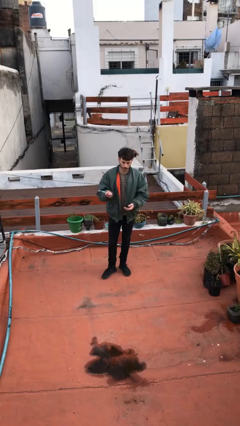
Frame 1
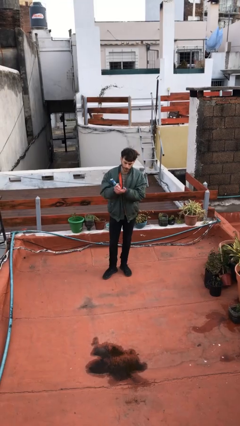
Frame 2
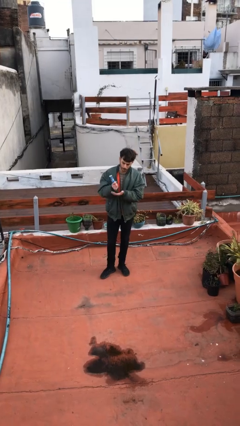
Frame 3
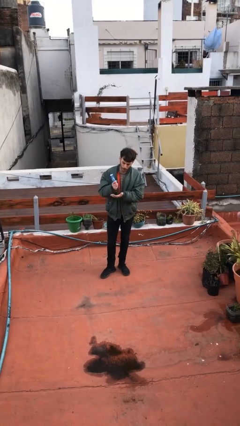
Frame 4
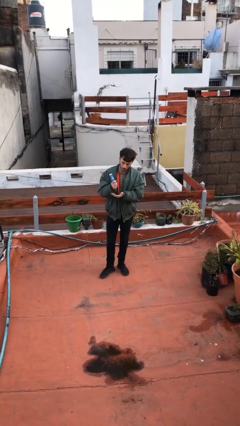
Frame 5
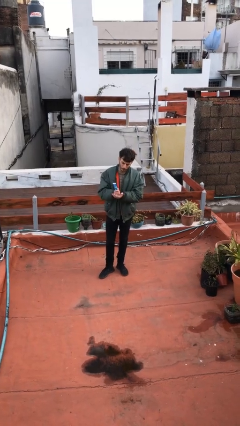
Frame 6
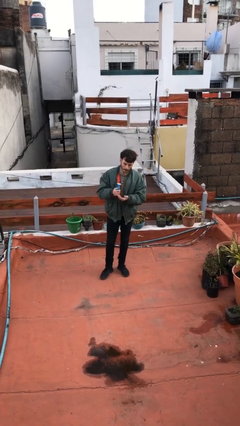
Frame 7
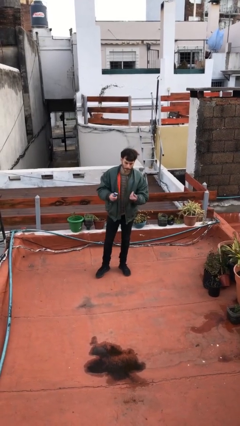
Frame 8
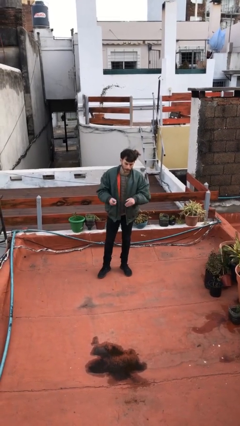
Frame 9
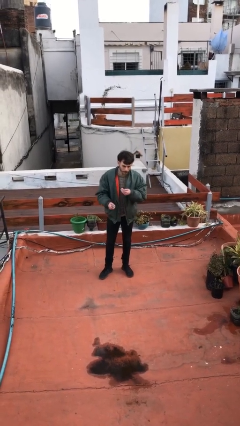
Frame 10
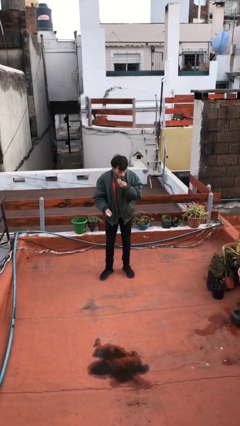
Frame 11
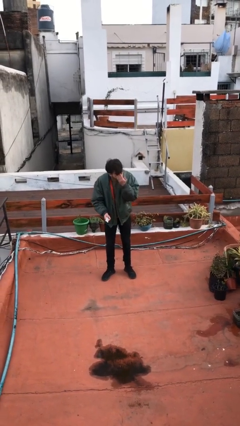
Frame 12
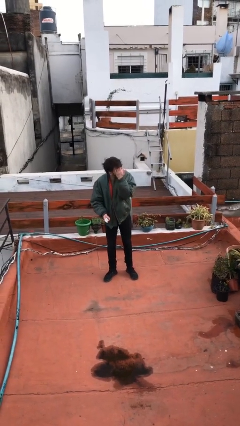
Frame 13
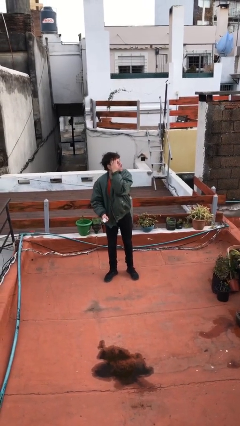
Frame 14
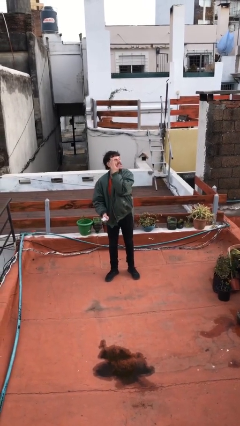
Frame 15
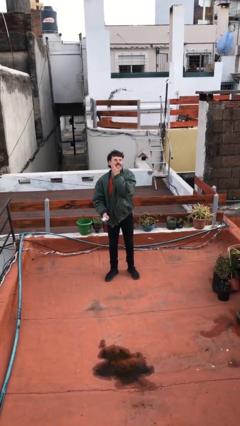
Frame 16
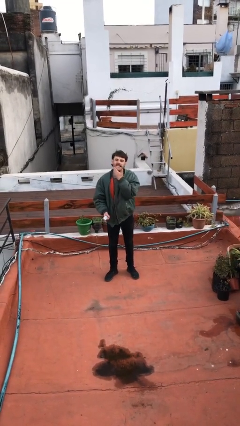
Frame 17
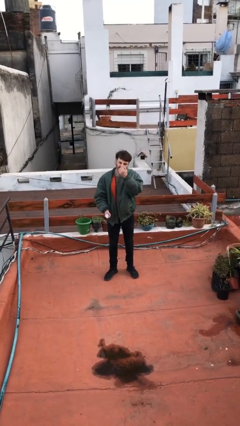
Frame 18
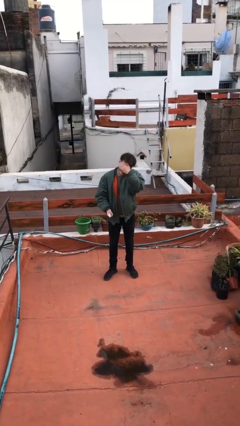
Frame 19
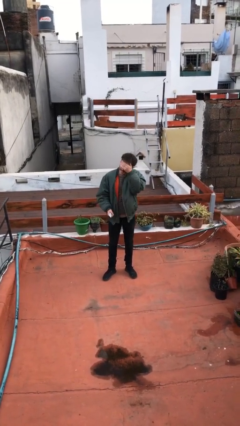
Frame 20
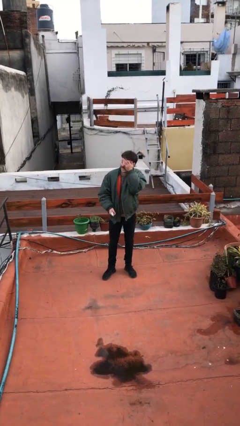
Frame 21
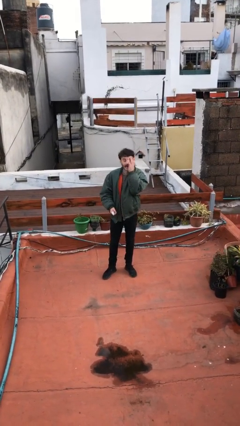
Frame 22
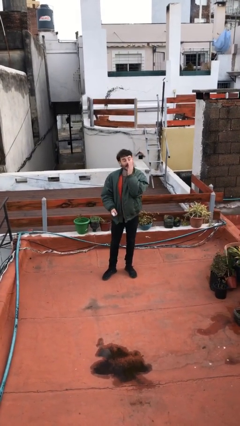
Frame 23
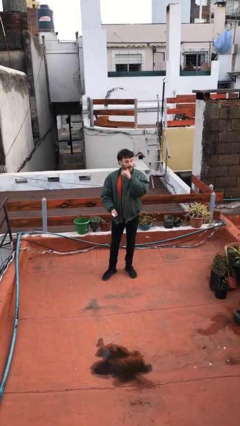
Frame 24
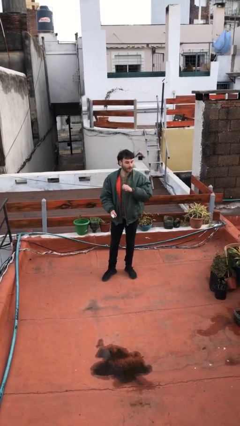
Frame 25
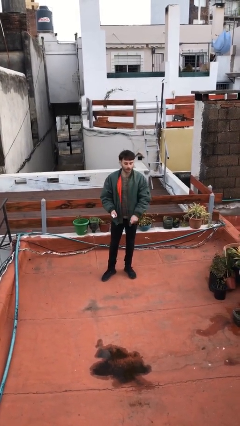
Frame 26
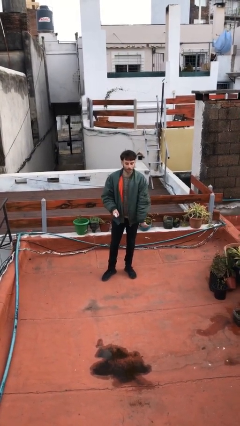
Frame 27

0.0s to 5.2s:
person applies facial moisturizer

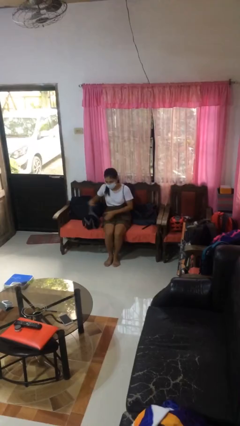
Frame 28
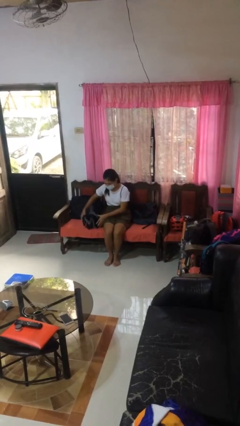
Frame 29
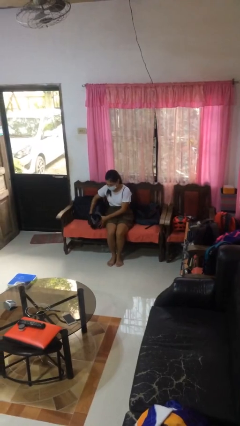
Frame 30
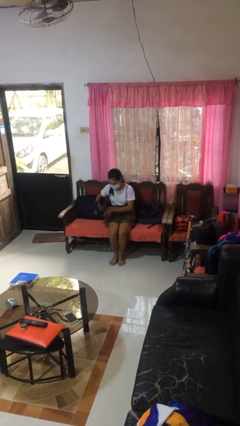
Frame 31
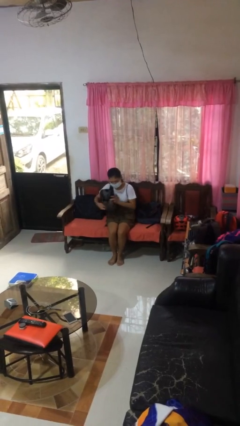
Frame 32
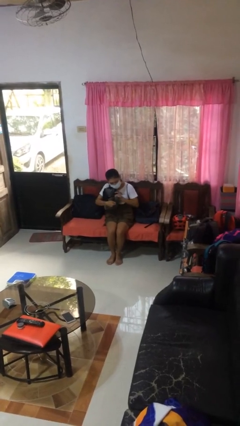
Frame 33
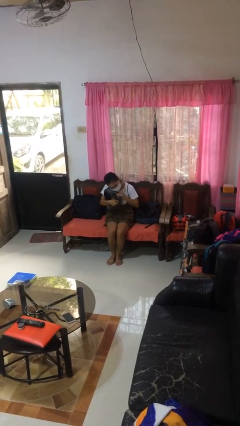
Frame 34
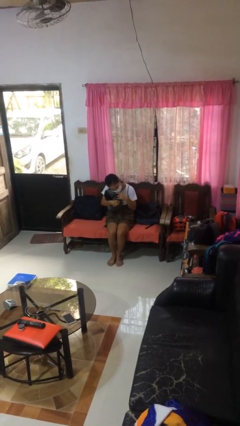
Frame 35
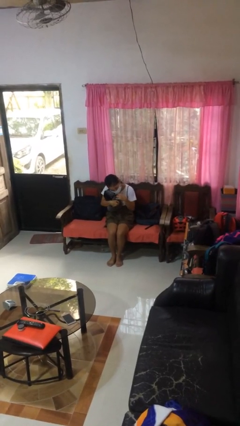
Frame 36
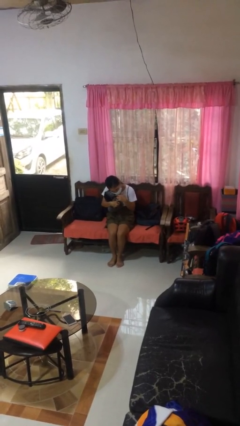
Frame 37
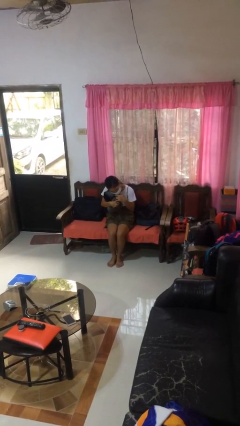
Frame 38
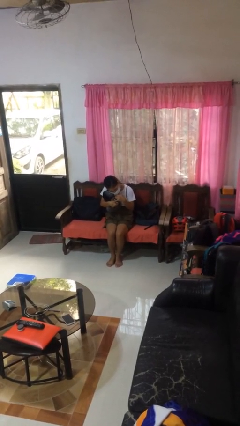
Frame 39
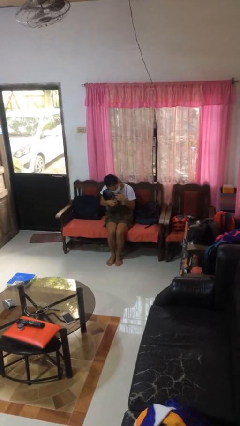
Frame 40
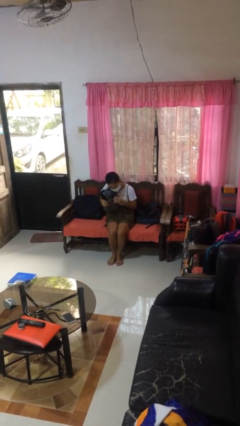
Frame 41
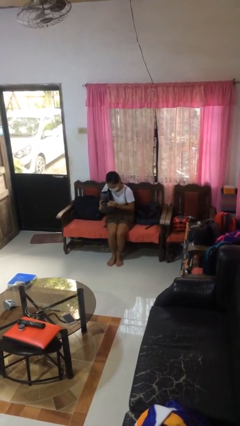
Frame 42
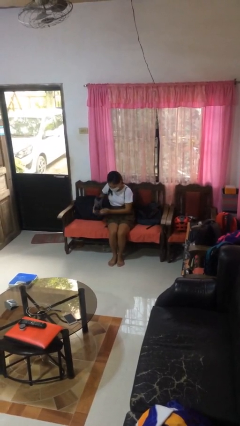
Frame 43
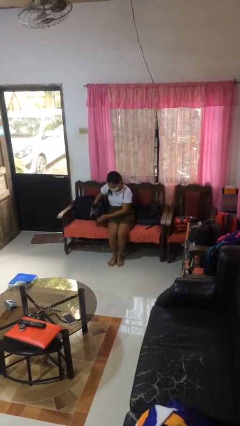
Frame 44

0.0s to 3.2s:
person hugs stuffed animal

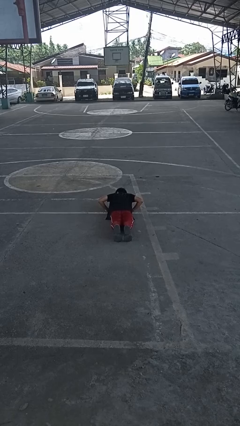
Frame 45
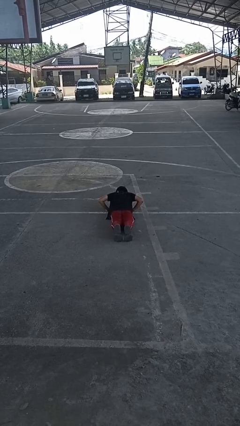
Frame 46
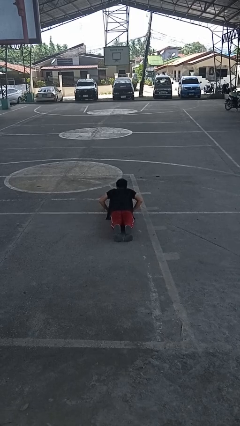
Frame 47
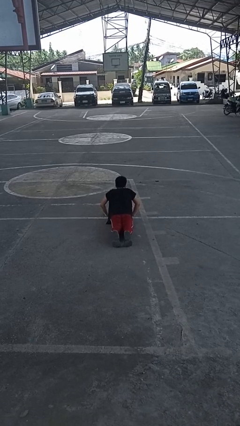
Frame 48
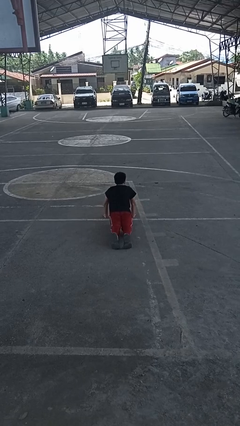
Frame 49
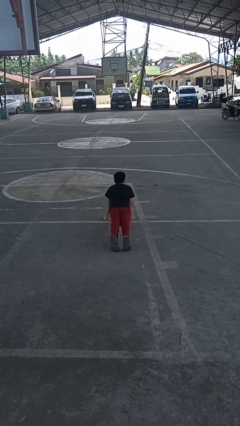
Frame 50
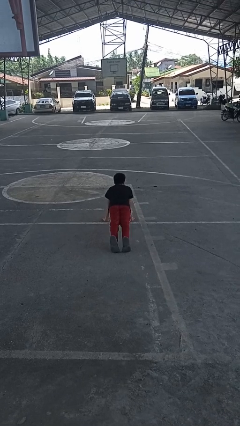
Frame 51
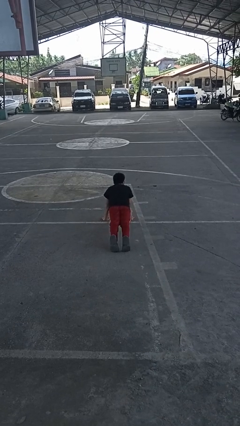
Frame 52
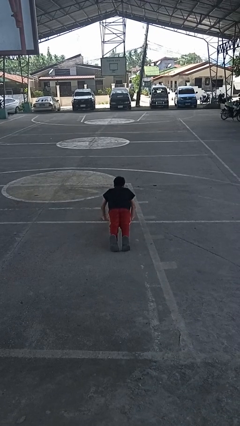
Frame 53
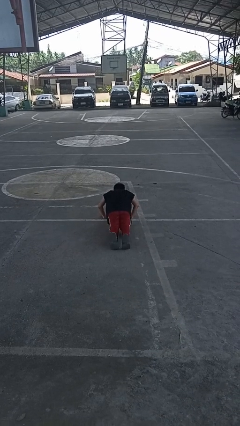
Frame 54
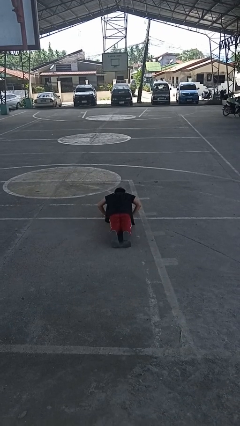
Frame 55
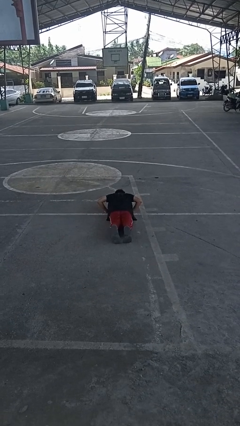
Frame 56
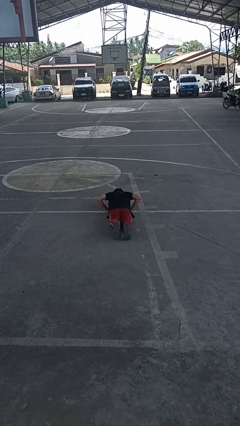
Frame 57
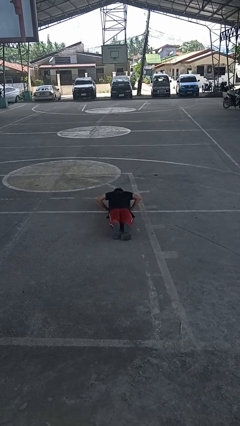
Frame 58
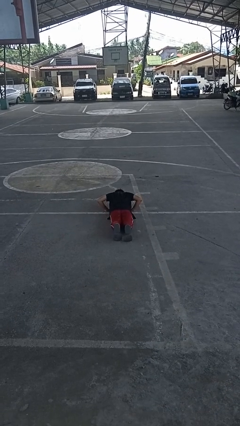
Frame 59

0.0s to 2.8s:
person exercises with pushup

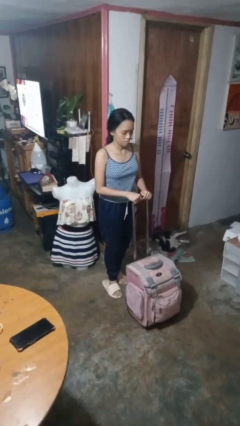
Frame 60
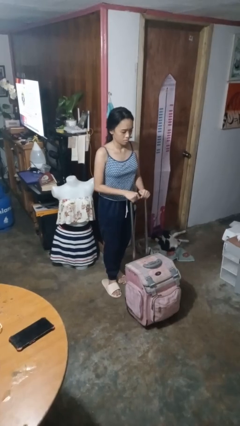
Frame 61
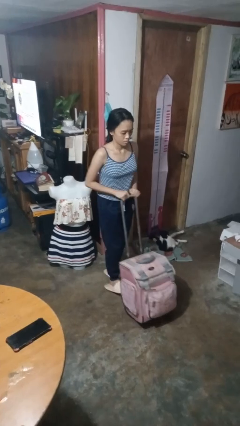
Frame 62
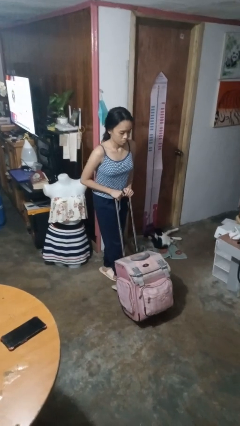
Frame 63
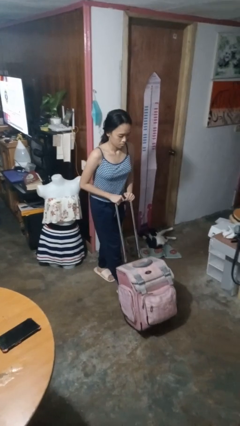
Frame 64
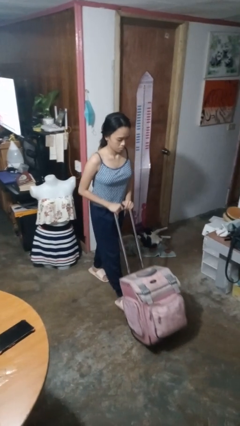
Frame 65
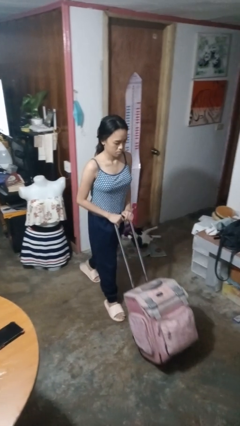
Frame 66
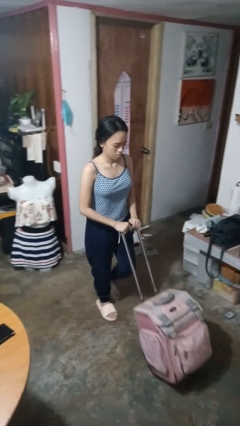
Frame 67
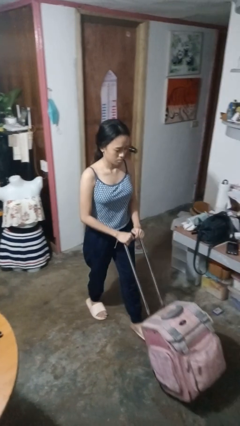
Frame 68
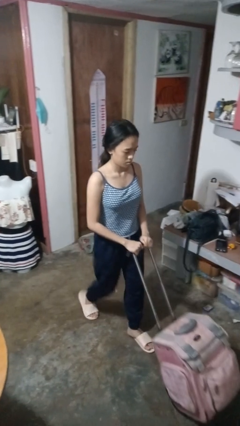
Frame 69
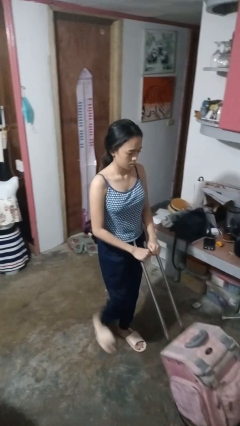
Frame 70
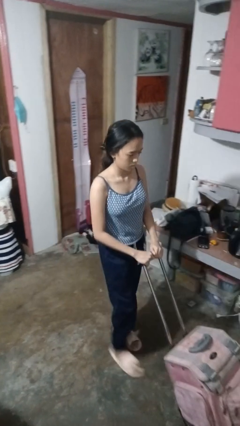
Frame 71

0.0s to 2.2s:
person pushes wheeled cart

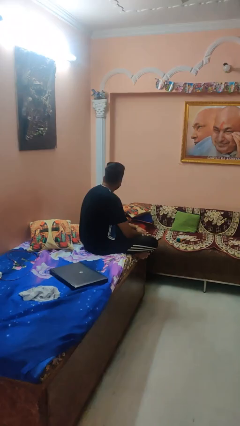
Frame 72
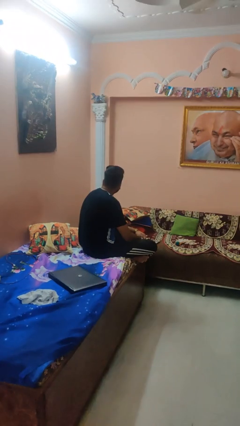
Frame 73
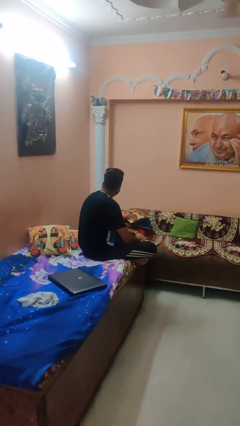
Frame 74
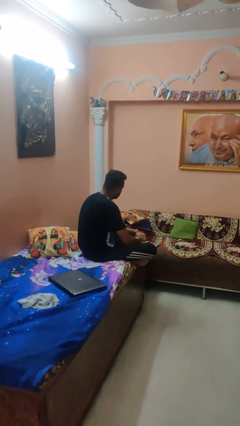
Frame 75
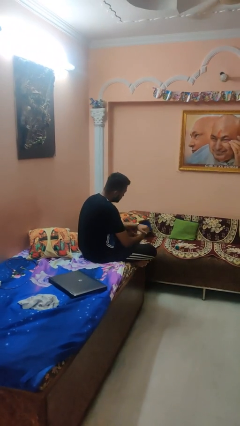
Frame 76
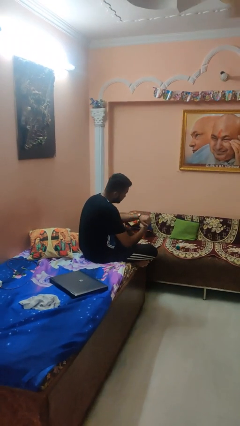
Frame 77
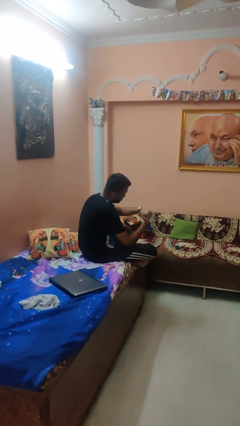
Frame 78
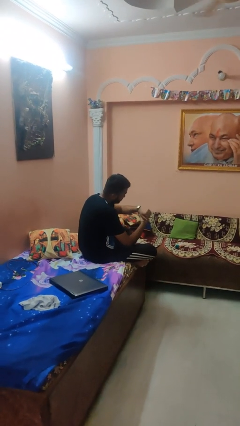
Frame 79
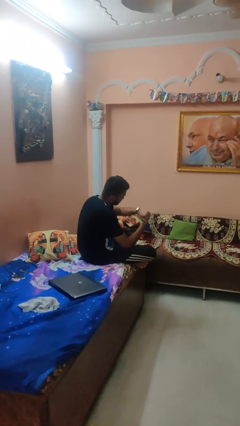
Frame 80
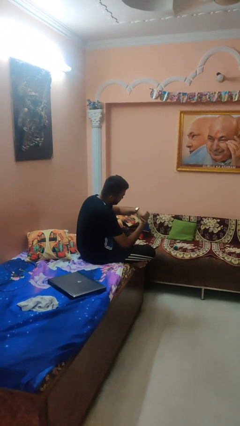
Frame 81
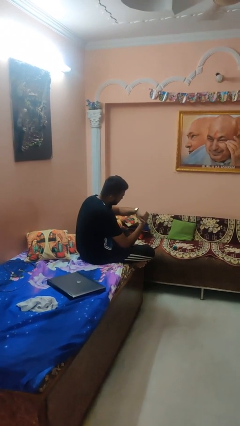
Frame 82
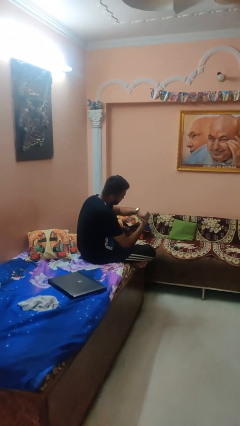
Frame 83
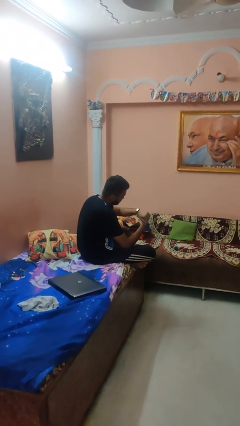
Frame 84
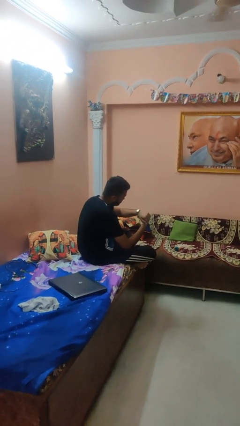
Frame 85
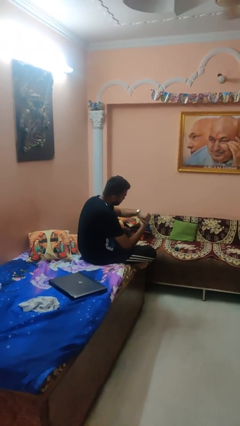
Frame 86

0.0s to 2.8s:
person looks at wristwatch

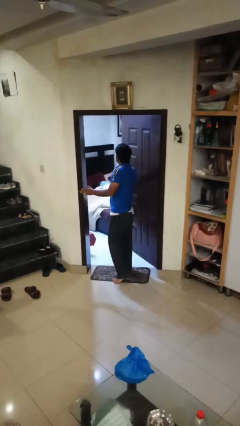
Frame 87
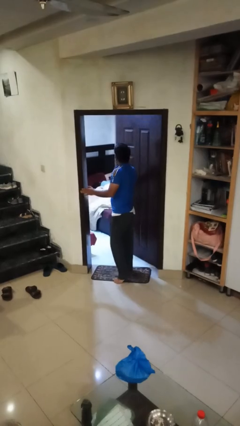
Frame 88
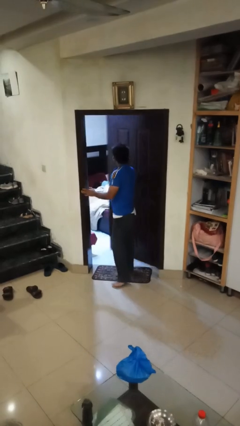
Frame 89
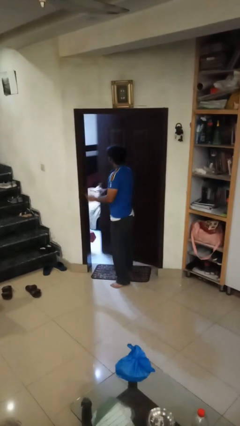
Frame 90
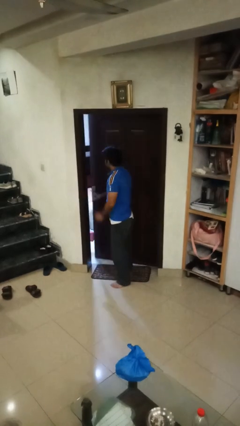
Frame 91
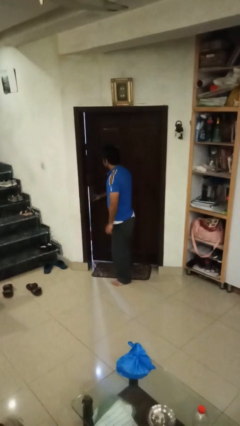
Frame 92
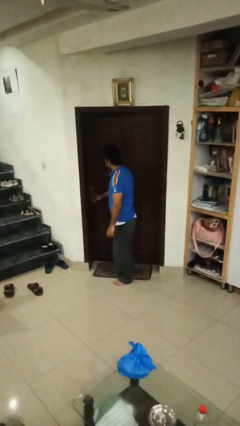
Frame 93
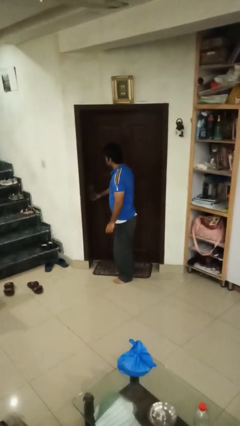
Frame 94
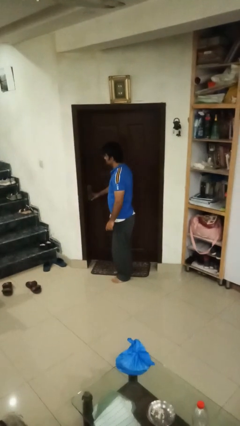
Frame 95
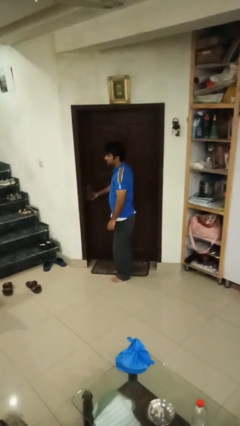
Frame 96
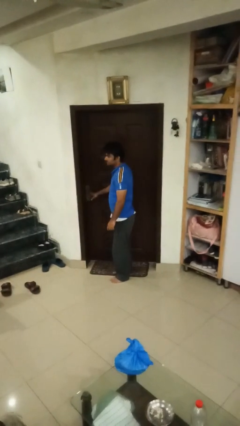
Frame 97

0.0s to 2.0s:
person closes facility door
